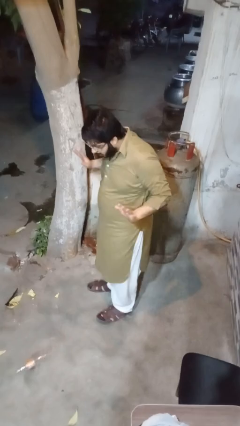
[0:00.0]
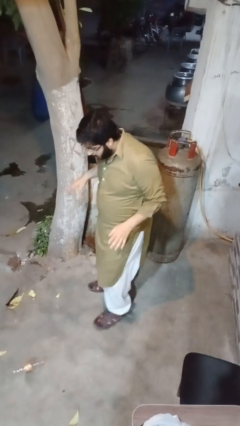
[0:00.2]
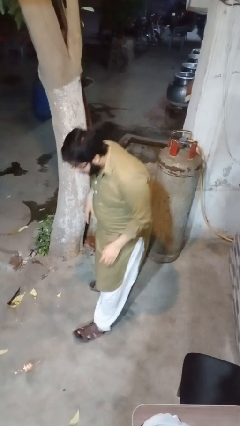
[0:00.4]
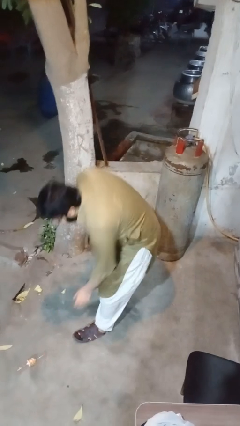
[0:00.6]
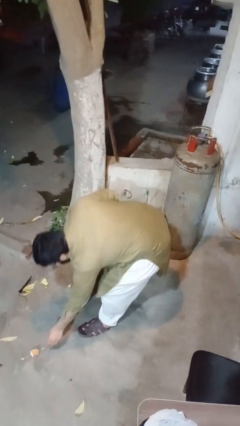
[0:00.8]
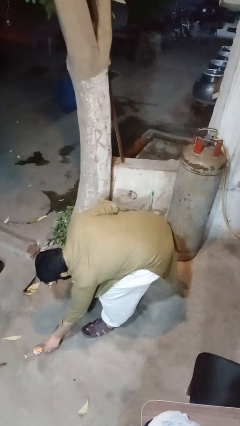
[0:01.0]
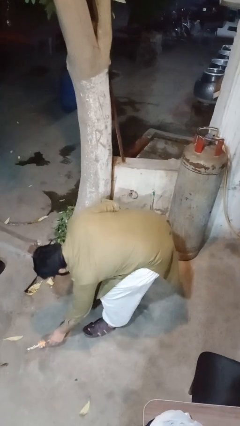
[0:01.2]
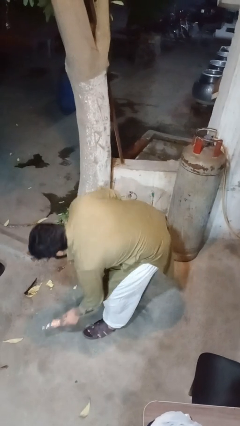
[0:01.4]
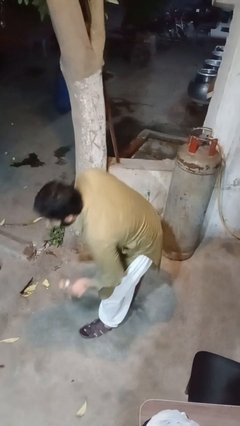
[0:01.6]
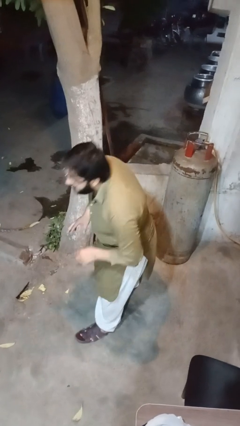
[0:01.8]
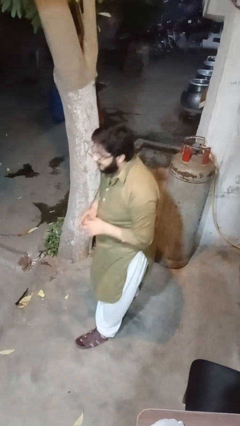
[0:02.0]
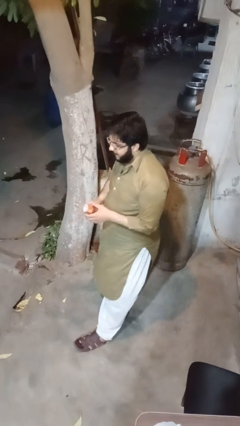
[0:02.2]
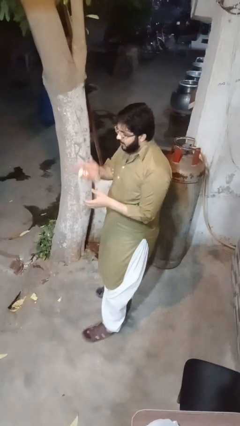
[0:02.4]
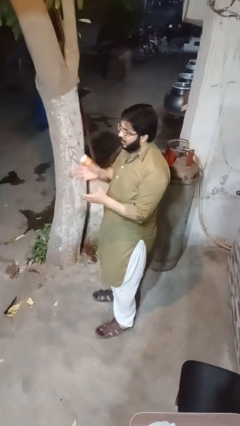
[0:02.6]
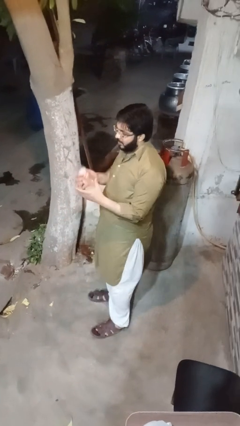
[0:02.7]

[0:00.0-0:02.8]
person picks up object from floor

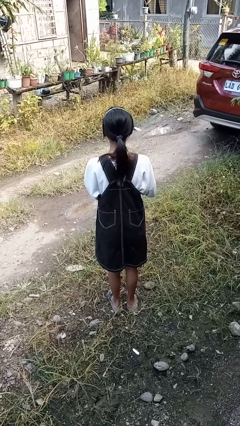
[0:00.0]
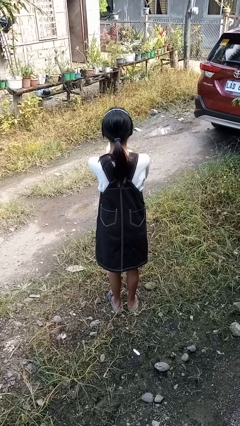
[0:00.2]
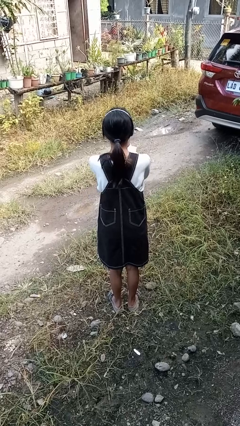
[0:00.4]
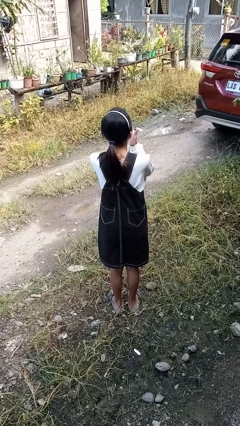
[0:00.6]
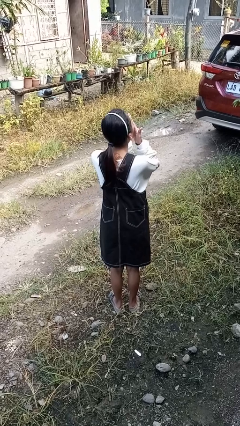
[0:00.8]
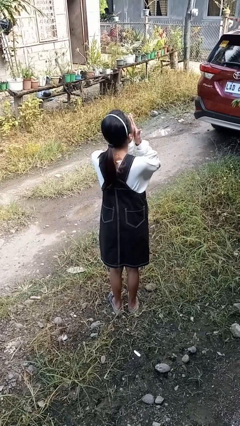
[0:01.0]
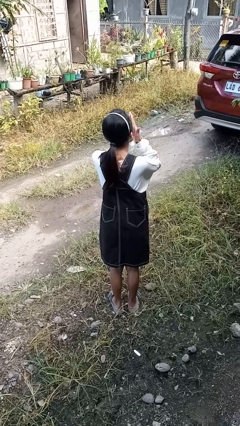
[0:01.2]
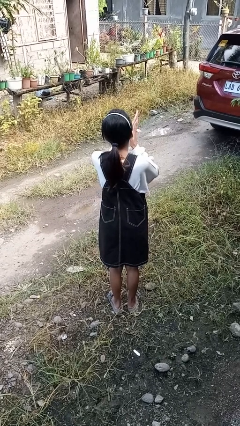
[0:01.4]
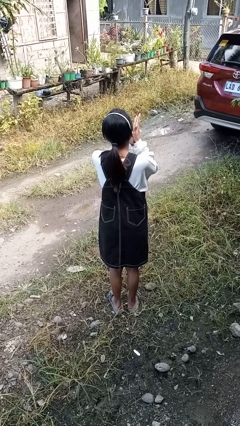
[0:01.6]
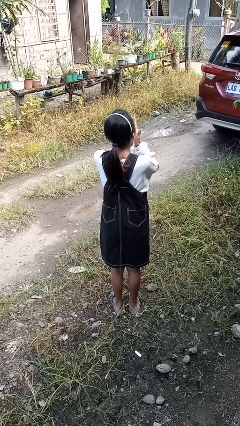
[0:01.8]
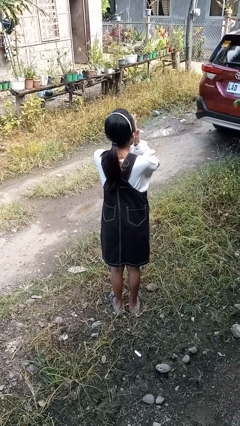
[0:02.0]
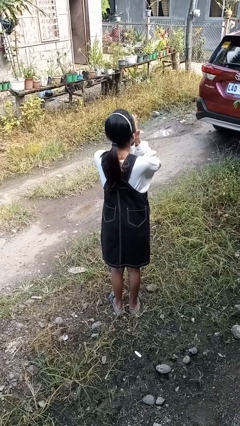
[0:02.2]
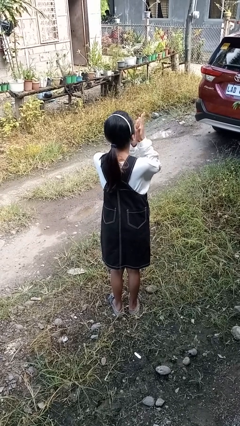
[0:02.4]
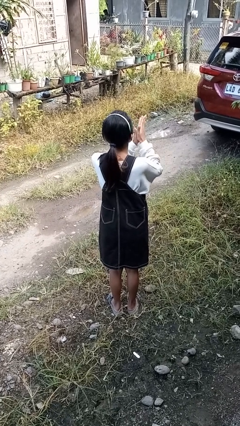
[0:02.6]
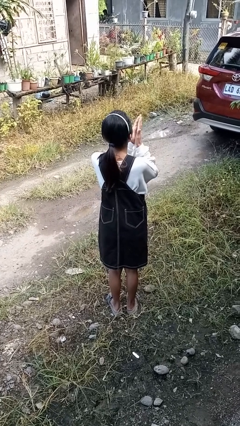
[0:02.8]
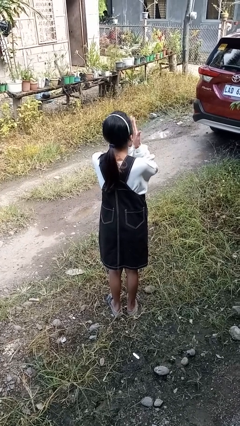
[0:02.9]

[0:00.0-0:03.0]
person blows into hands

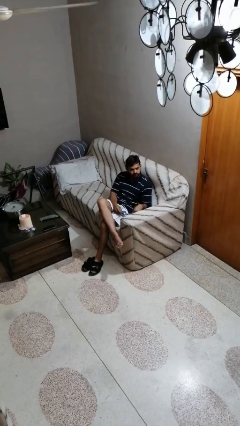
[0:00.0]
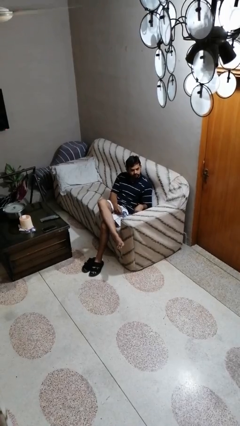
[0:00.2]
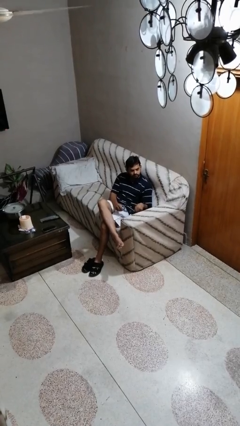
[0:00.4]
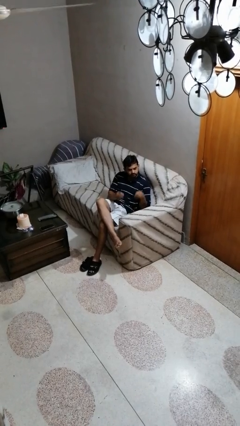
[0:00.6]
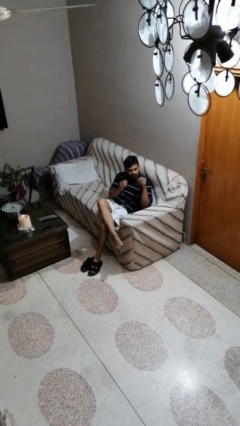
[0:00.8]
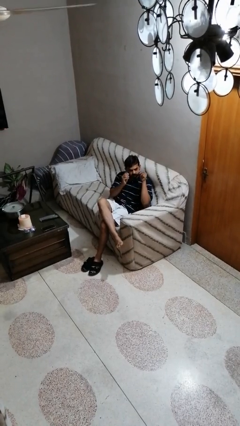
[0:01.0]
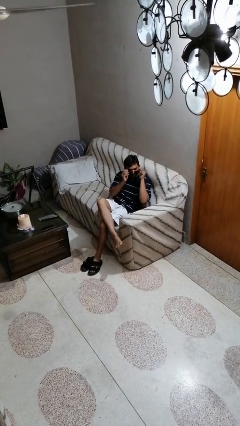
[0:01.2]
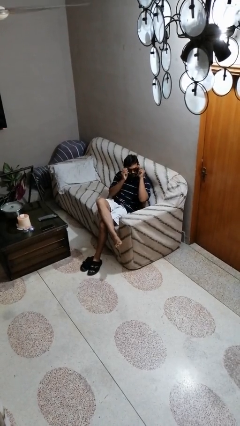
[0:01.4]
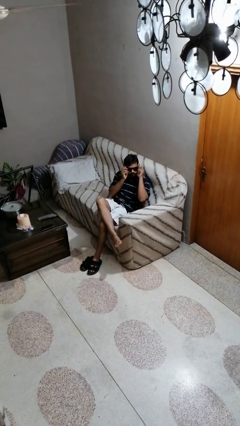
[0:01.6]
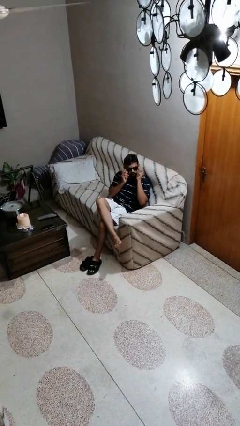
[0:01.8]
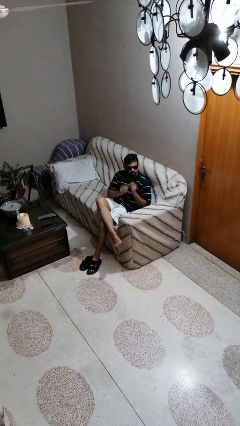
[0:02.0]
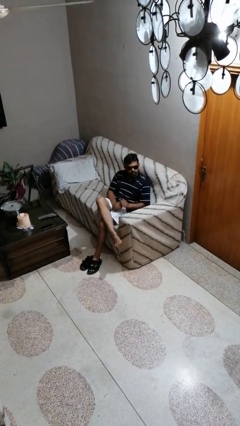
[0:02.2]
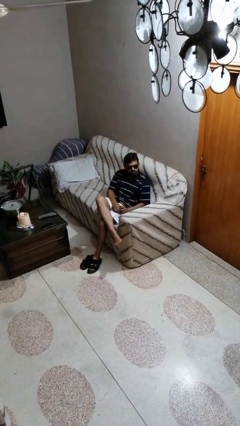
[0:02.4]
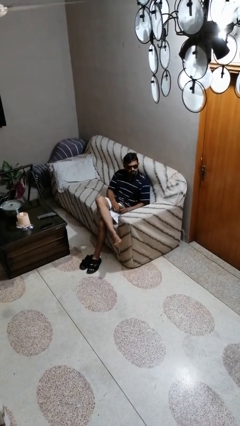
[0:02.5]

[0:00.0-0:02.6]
person puts on sunglasses

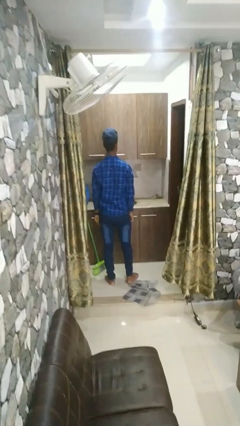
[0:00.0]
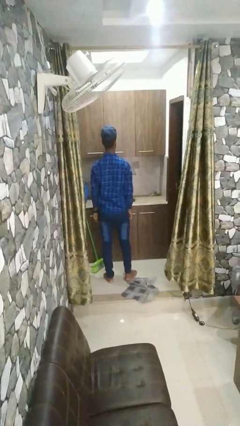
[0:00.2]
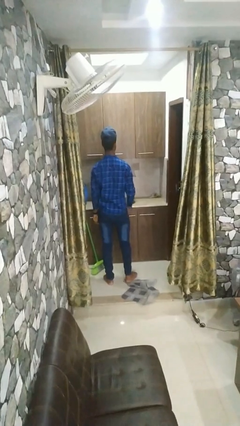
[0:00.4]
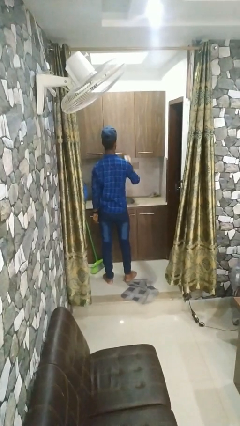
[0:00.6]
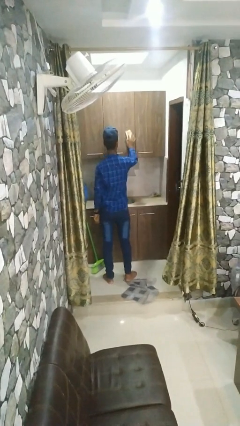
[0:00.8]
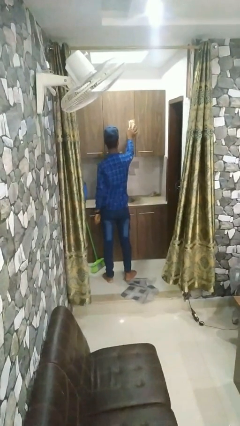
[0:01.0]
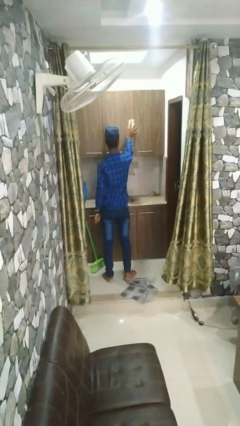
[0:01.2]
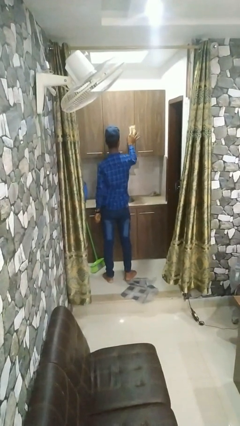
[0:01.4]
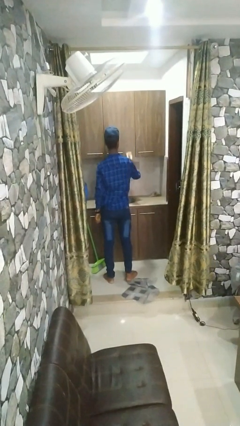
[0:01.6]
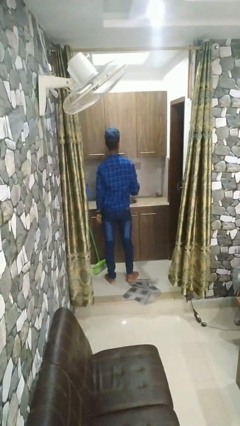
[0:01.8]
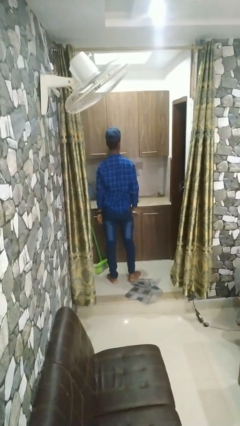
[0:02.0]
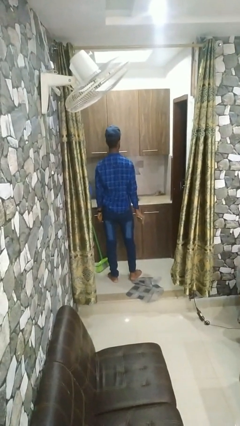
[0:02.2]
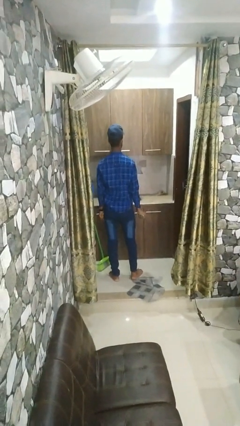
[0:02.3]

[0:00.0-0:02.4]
person washes window

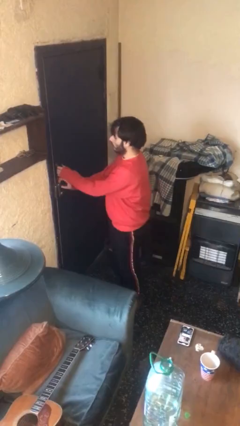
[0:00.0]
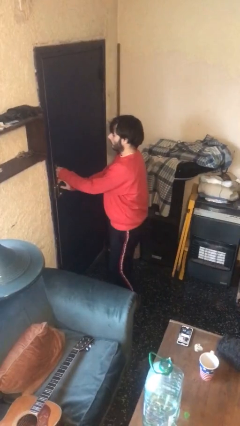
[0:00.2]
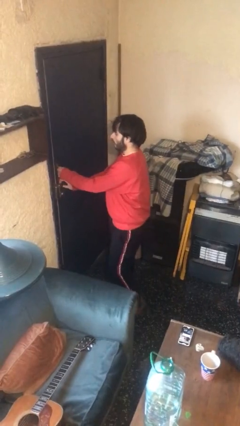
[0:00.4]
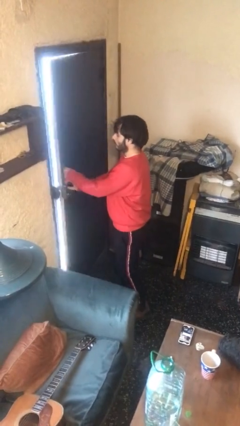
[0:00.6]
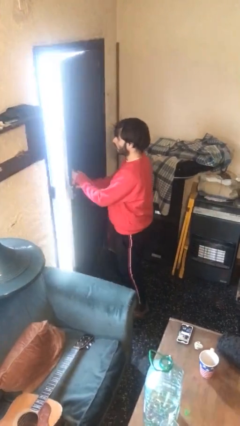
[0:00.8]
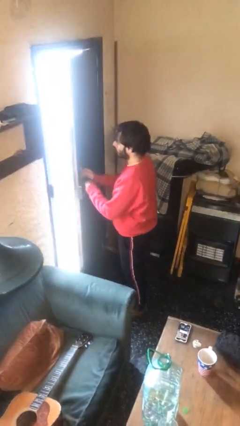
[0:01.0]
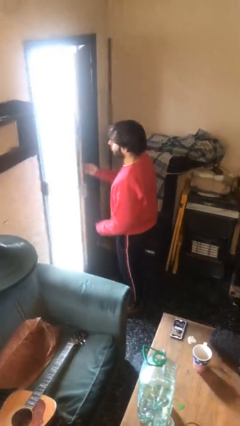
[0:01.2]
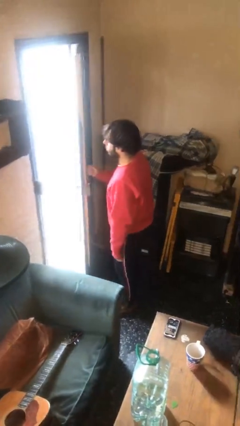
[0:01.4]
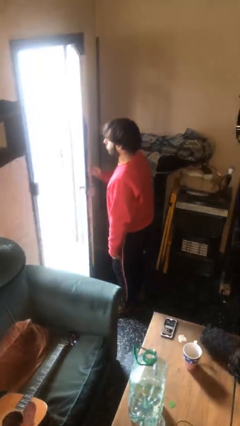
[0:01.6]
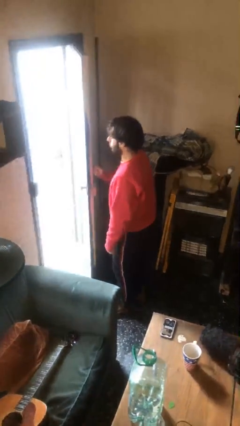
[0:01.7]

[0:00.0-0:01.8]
person opens facility door

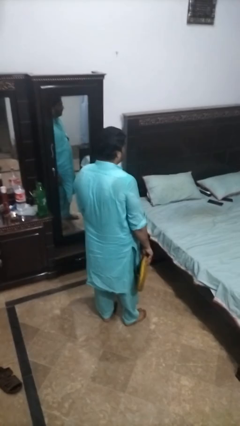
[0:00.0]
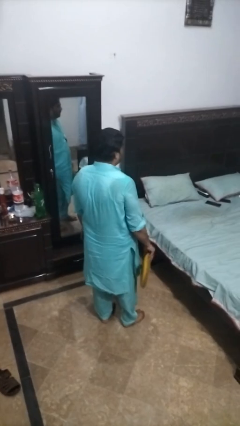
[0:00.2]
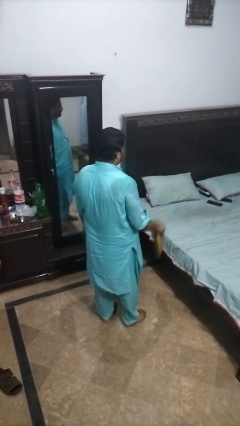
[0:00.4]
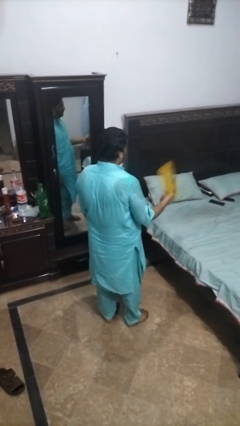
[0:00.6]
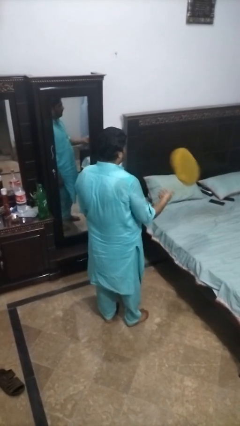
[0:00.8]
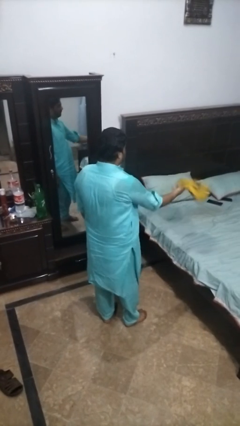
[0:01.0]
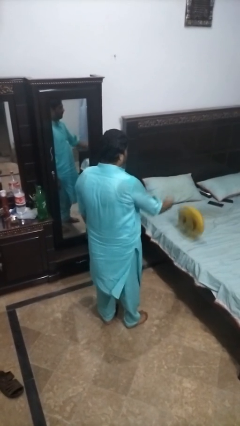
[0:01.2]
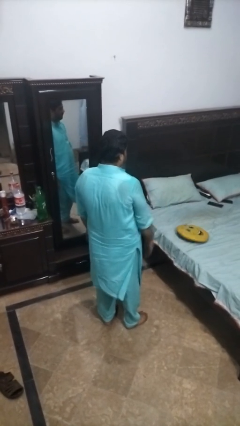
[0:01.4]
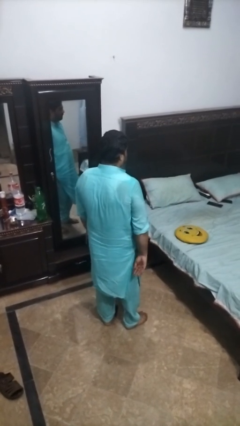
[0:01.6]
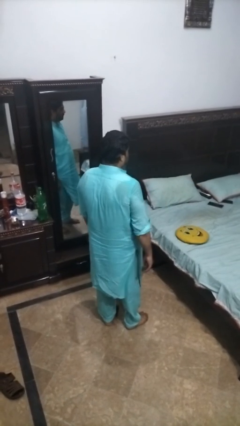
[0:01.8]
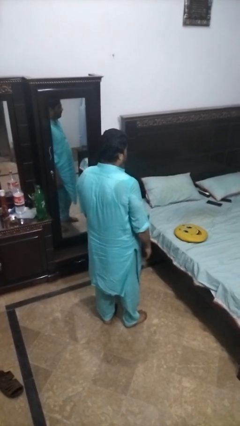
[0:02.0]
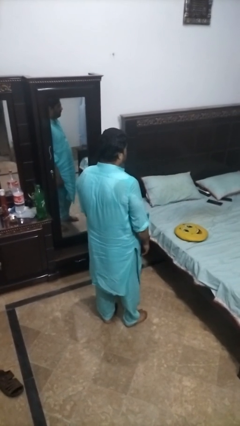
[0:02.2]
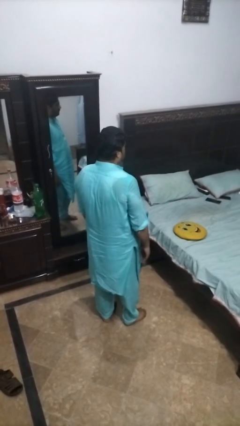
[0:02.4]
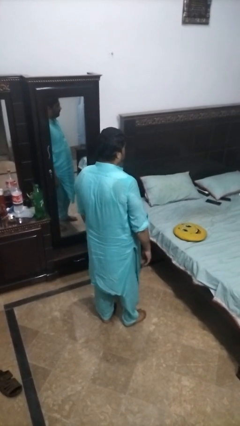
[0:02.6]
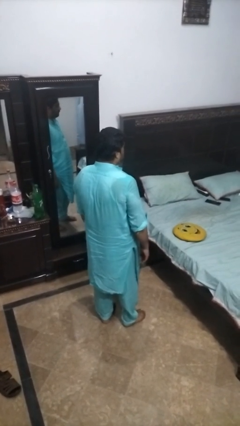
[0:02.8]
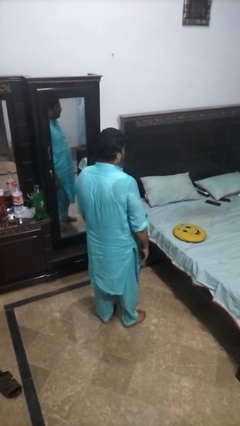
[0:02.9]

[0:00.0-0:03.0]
person throws object on bed

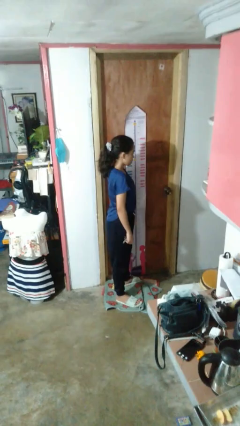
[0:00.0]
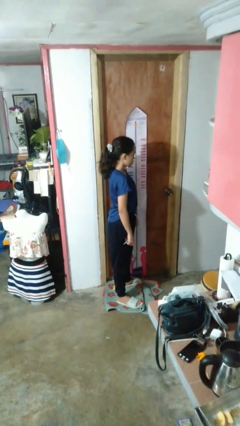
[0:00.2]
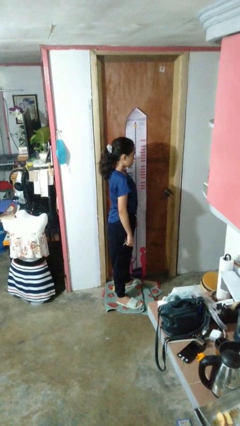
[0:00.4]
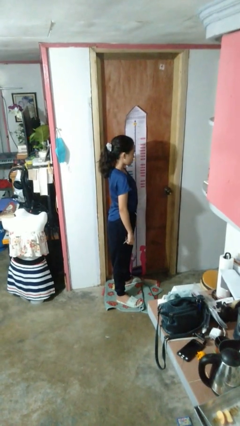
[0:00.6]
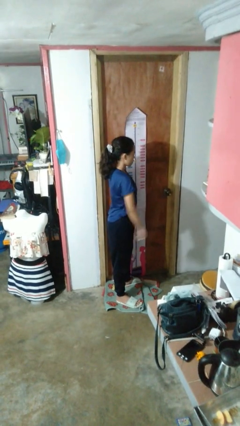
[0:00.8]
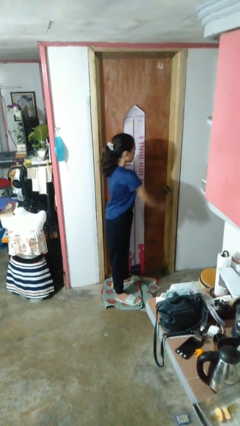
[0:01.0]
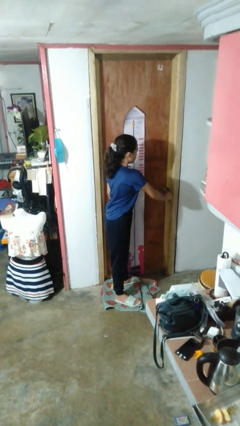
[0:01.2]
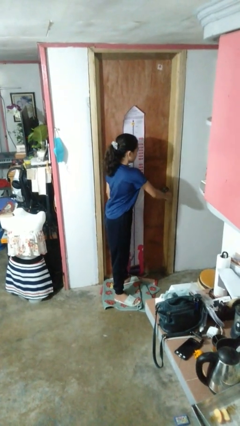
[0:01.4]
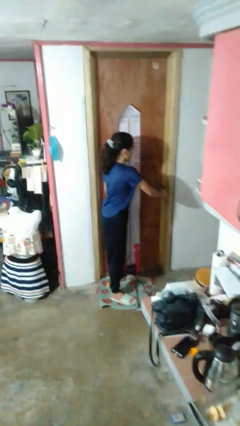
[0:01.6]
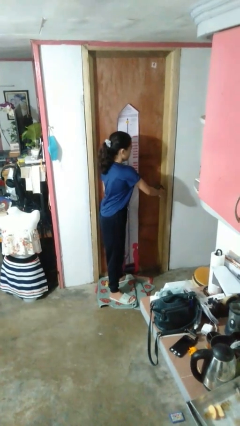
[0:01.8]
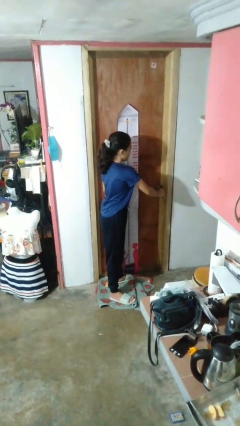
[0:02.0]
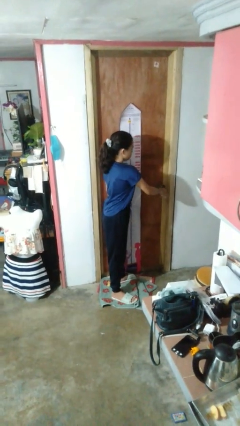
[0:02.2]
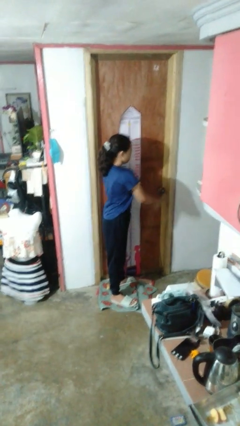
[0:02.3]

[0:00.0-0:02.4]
person unlocks door with keys
